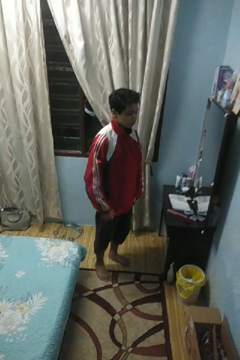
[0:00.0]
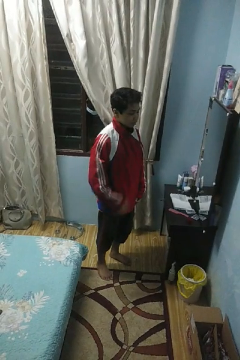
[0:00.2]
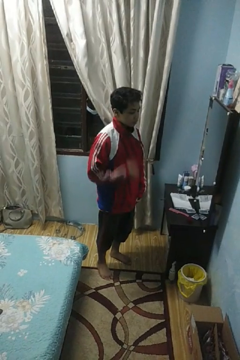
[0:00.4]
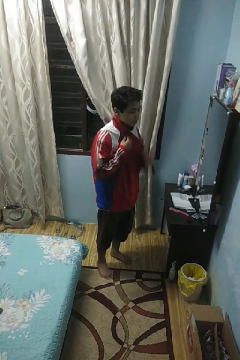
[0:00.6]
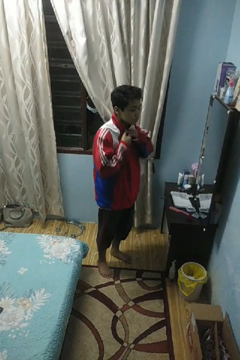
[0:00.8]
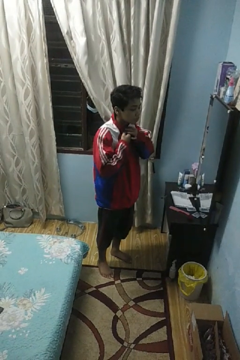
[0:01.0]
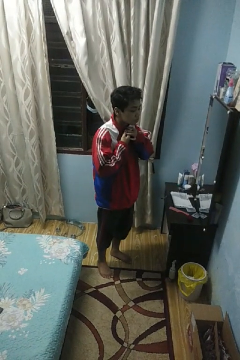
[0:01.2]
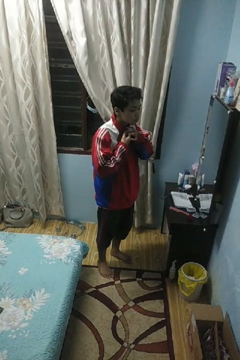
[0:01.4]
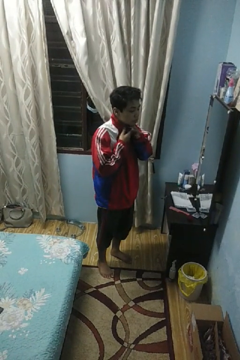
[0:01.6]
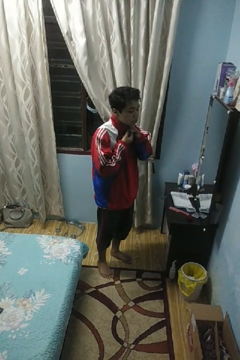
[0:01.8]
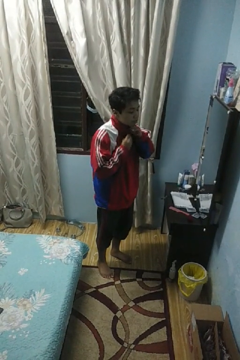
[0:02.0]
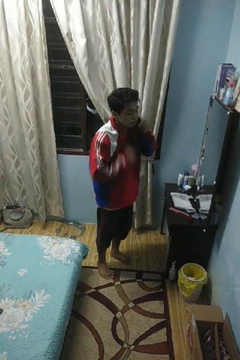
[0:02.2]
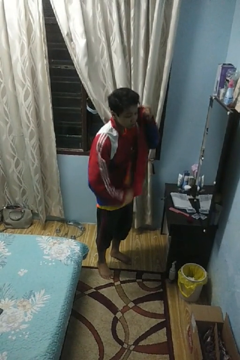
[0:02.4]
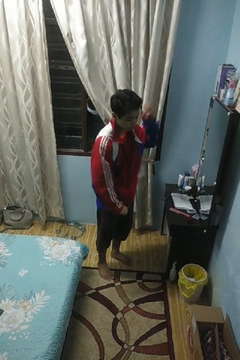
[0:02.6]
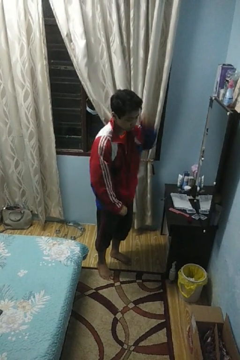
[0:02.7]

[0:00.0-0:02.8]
person unzips jacket

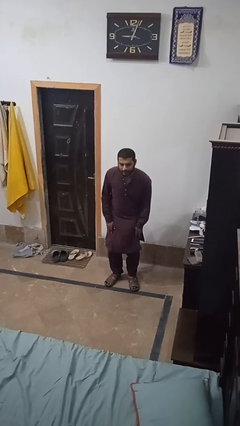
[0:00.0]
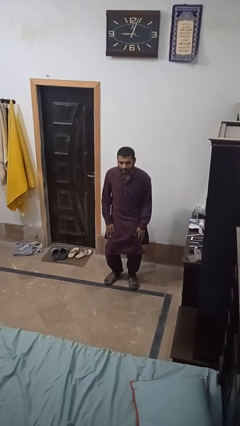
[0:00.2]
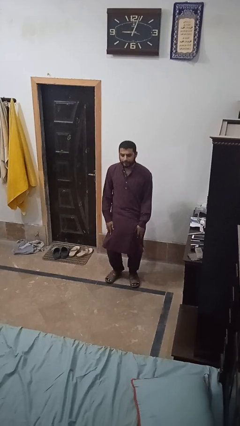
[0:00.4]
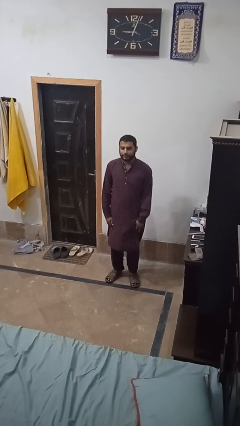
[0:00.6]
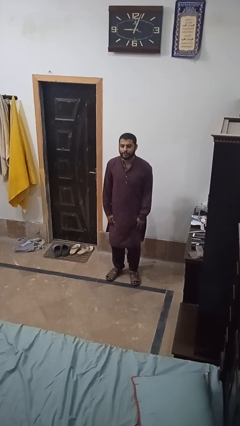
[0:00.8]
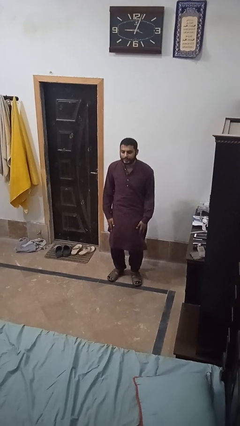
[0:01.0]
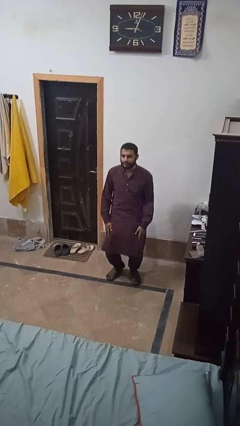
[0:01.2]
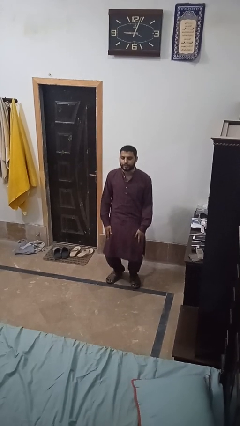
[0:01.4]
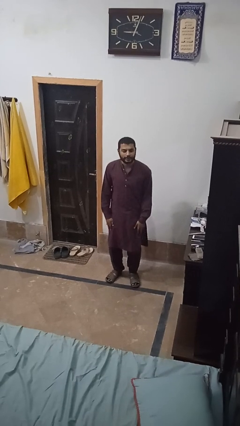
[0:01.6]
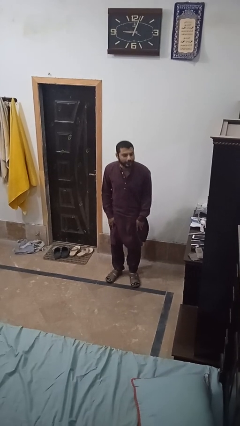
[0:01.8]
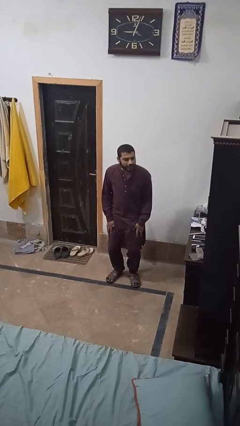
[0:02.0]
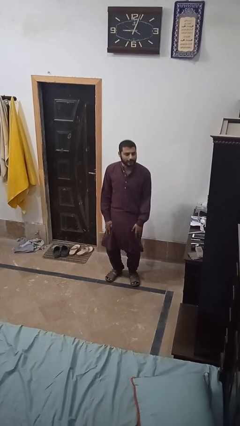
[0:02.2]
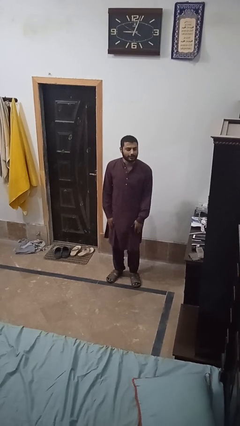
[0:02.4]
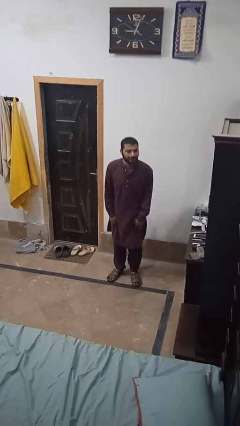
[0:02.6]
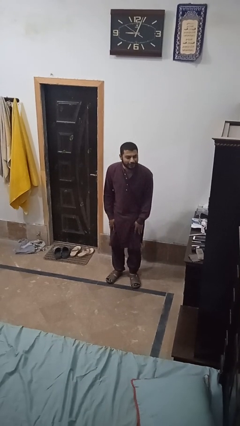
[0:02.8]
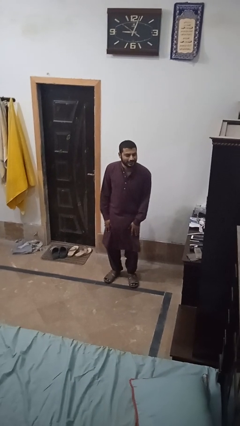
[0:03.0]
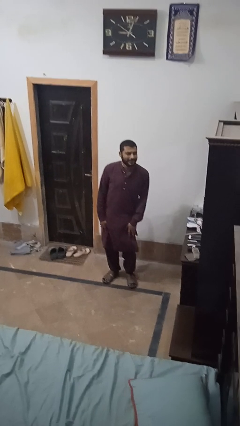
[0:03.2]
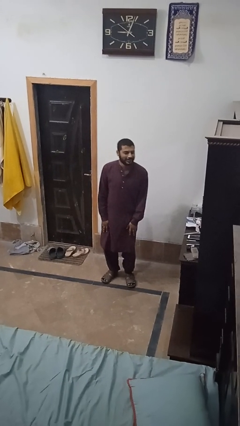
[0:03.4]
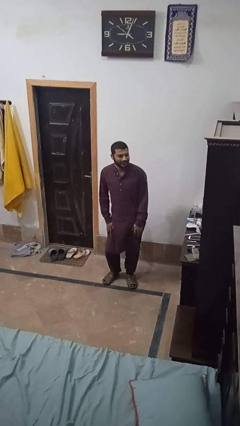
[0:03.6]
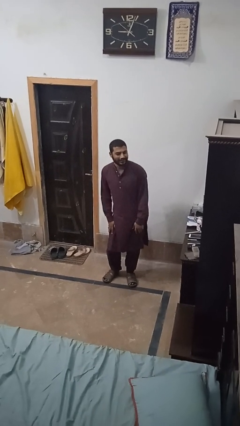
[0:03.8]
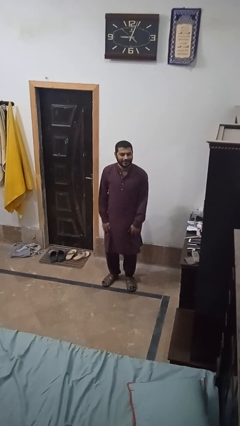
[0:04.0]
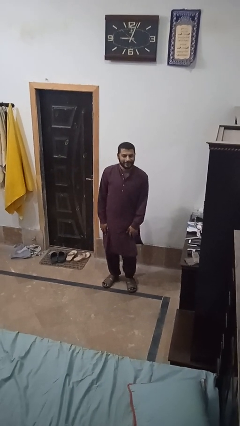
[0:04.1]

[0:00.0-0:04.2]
person wiggles hips

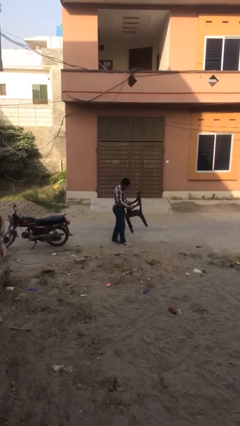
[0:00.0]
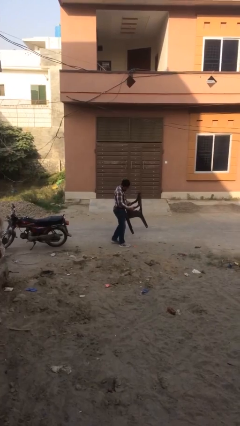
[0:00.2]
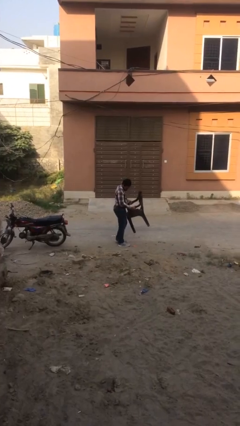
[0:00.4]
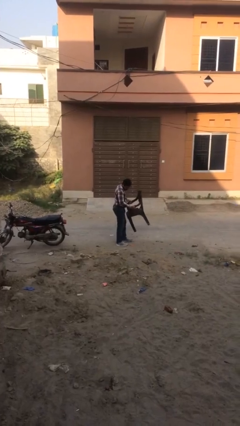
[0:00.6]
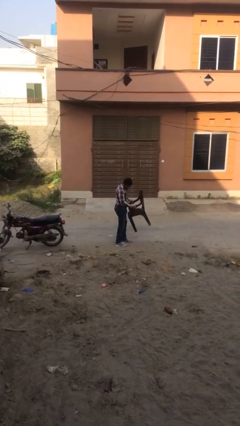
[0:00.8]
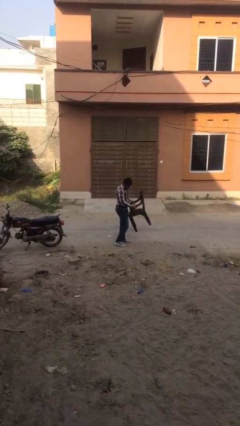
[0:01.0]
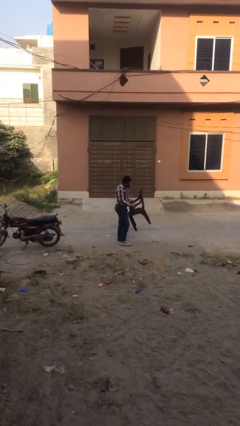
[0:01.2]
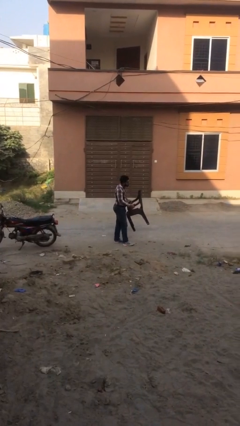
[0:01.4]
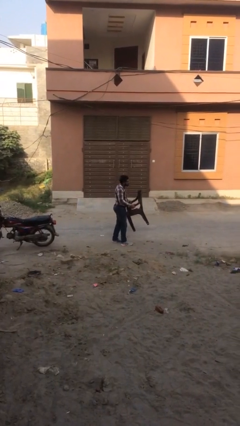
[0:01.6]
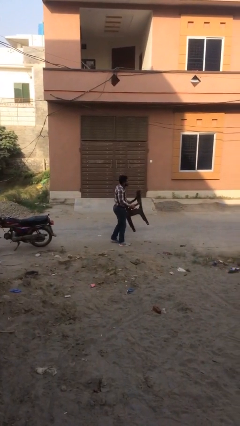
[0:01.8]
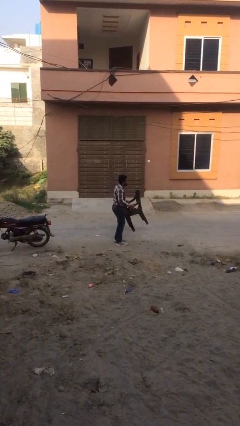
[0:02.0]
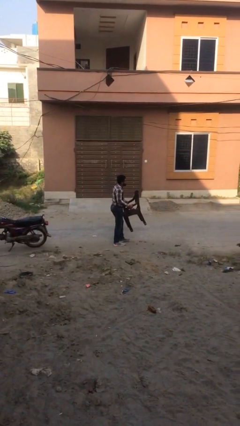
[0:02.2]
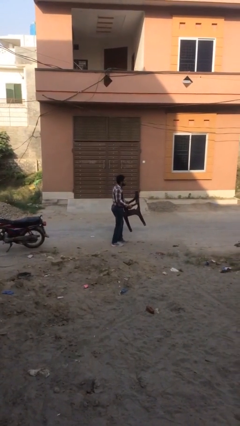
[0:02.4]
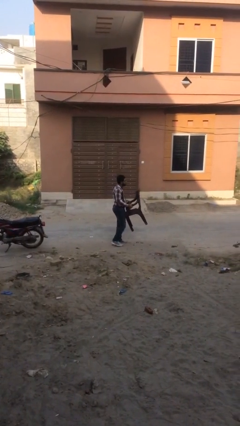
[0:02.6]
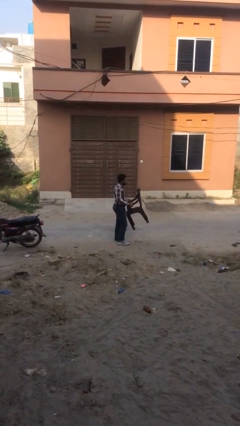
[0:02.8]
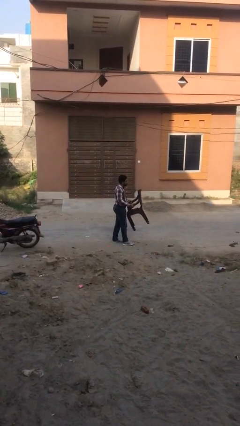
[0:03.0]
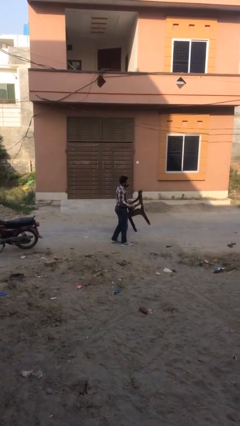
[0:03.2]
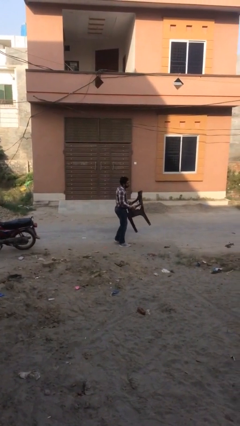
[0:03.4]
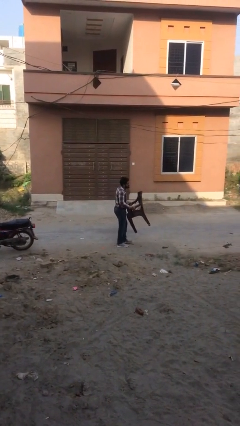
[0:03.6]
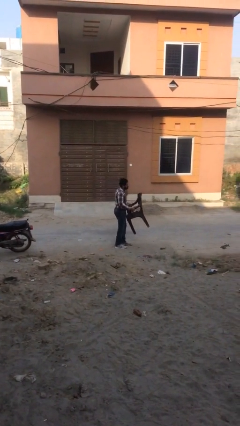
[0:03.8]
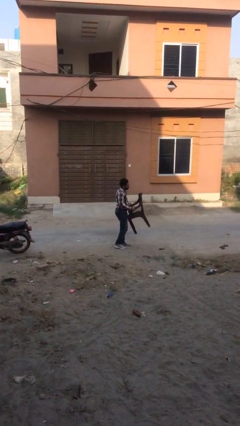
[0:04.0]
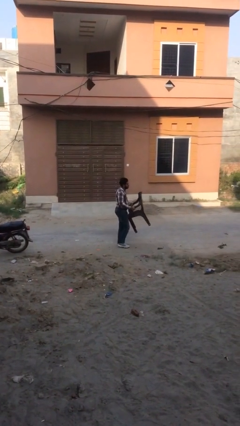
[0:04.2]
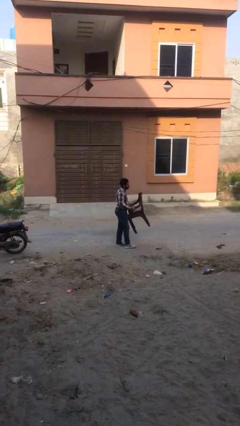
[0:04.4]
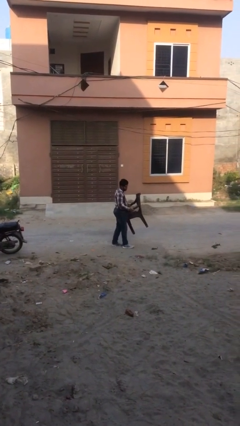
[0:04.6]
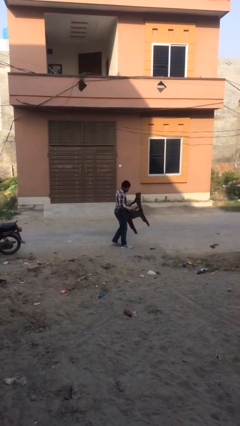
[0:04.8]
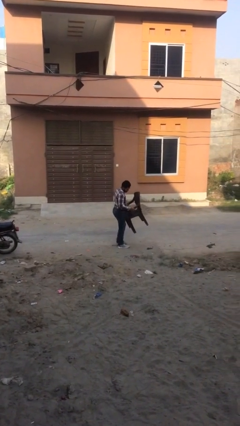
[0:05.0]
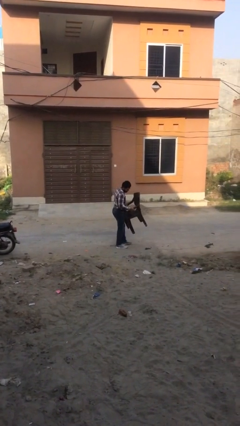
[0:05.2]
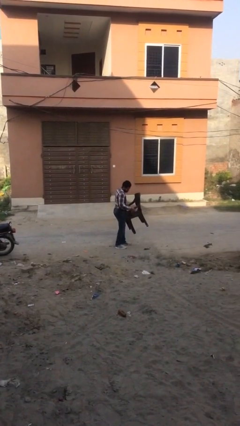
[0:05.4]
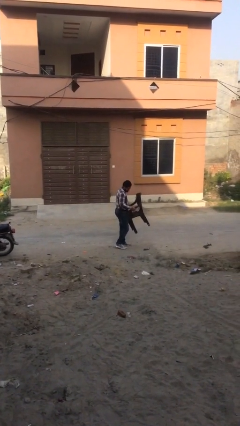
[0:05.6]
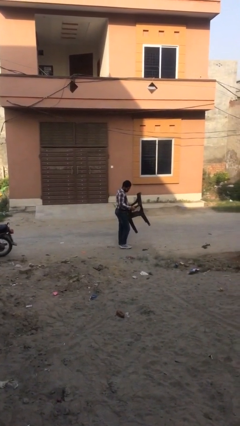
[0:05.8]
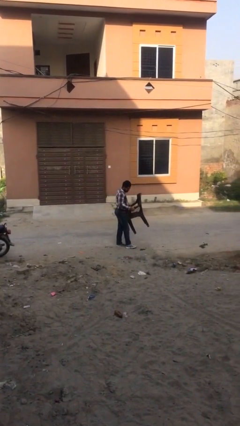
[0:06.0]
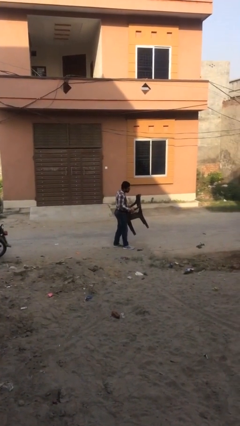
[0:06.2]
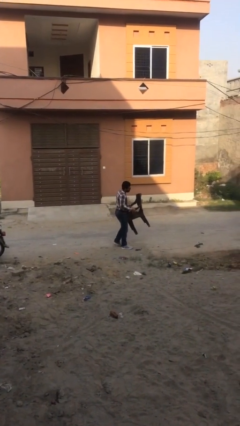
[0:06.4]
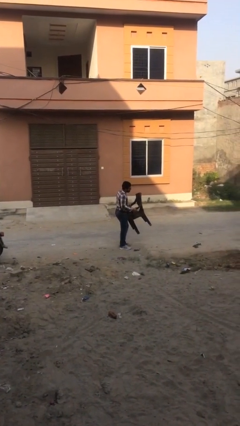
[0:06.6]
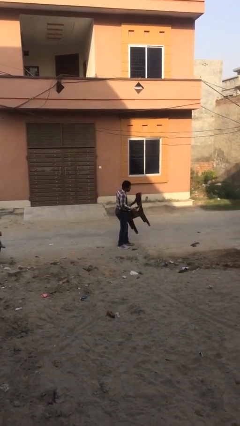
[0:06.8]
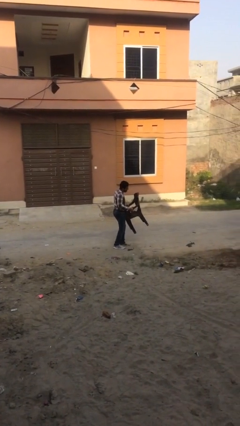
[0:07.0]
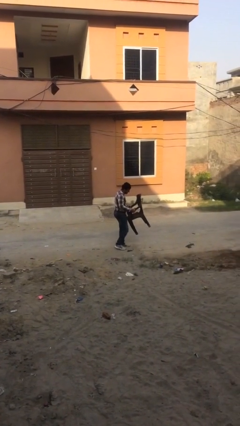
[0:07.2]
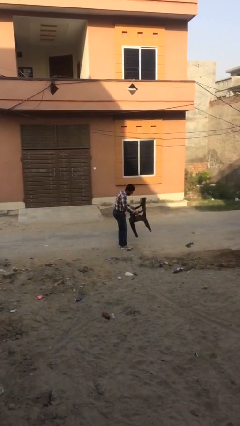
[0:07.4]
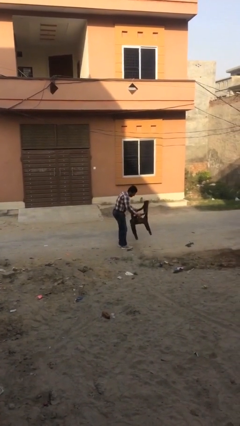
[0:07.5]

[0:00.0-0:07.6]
person carries heavy object

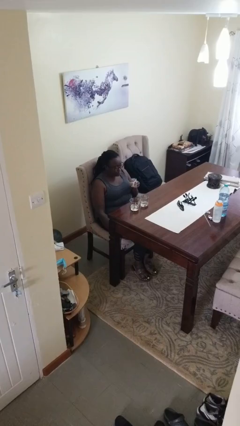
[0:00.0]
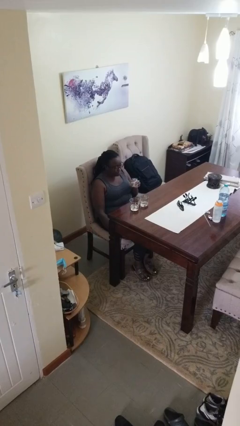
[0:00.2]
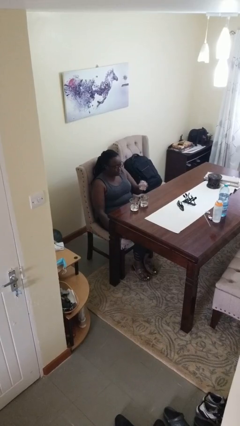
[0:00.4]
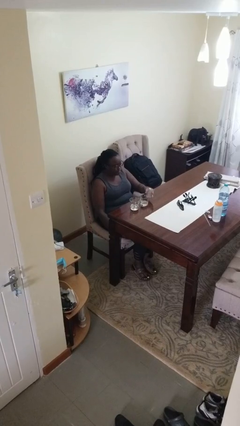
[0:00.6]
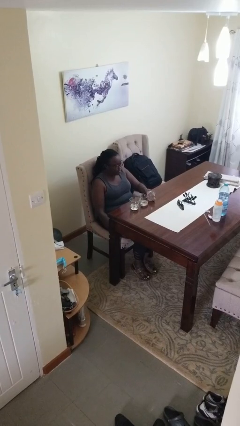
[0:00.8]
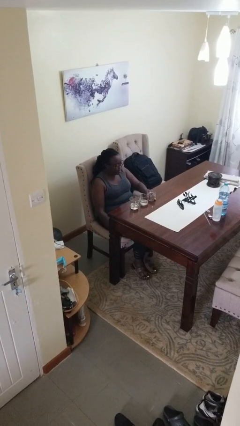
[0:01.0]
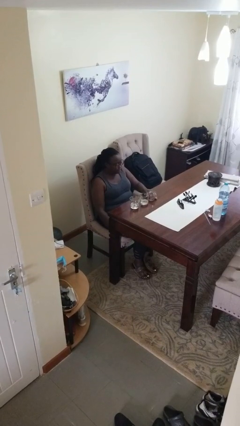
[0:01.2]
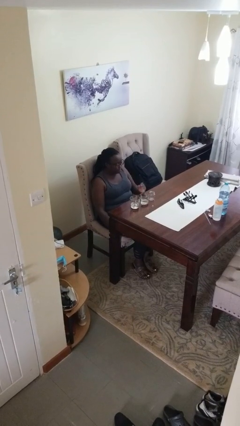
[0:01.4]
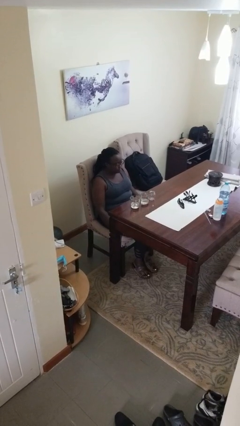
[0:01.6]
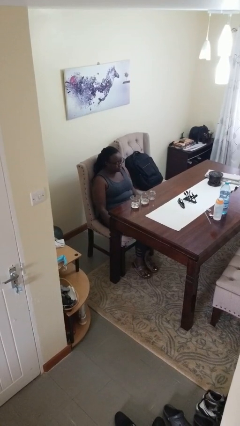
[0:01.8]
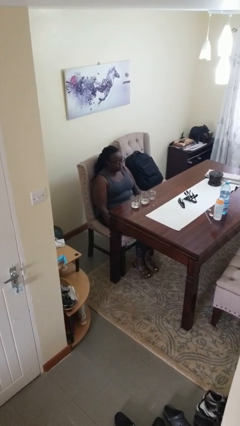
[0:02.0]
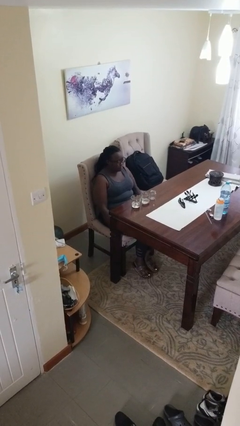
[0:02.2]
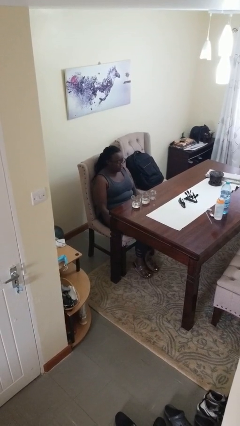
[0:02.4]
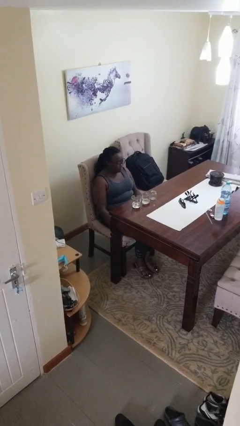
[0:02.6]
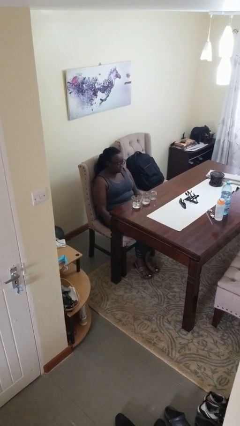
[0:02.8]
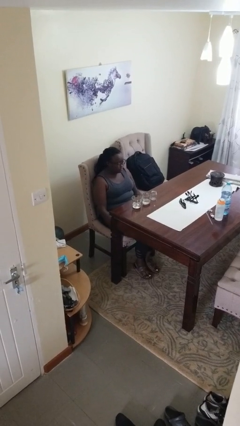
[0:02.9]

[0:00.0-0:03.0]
person puts down object on table

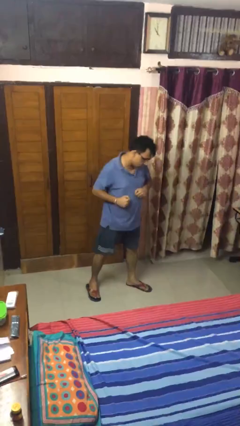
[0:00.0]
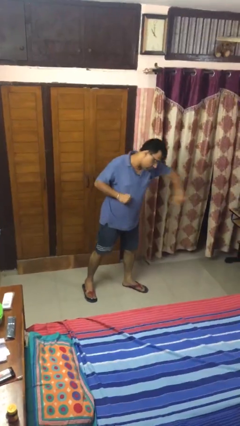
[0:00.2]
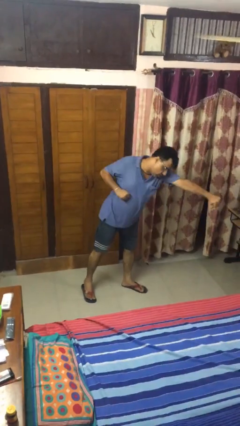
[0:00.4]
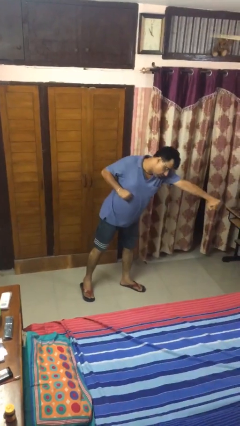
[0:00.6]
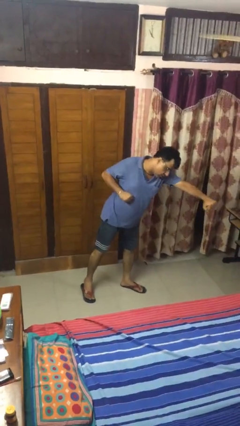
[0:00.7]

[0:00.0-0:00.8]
person karate chop

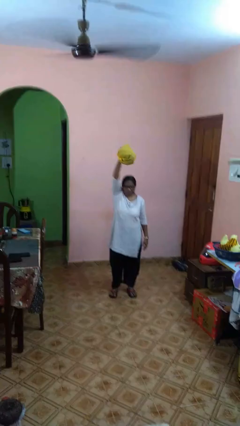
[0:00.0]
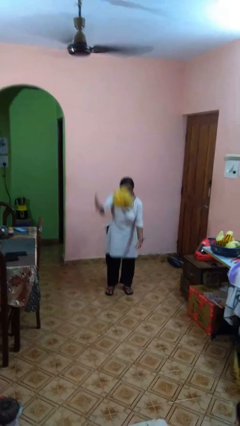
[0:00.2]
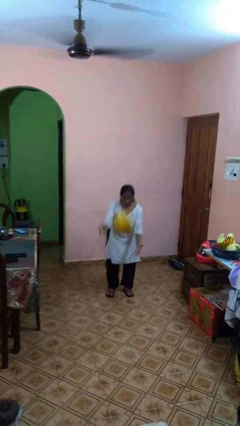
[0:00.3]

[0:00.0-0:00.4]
person drops object
